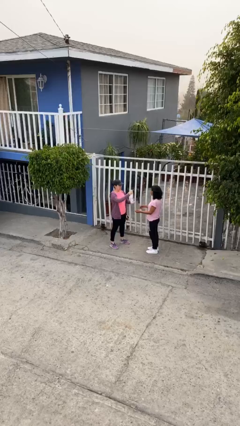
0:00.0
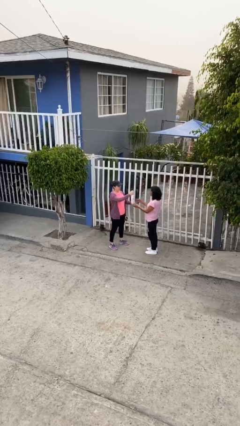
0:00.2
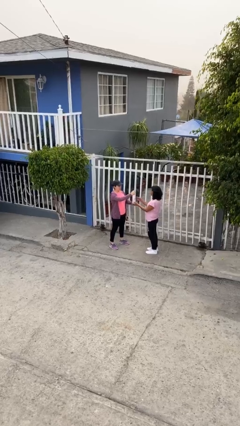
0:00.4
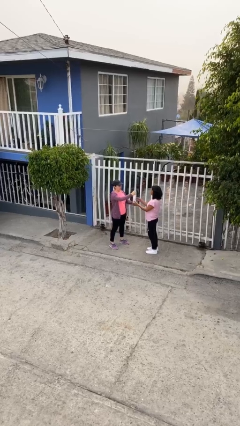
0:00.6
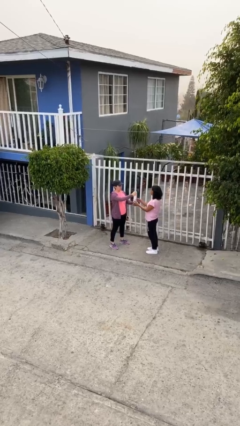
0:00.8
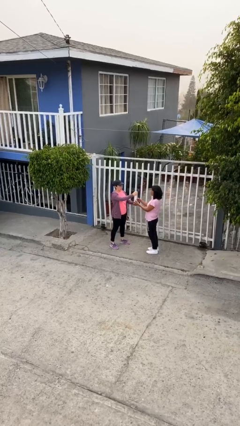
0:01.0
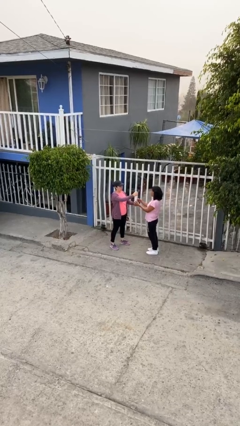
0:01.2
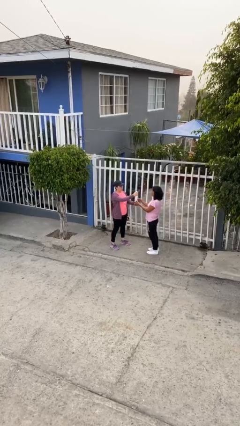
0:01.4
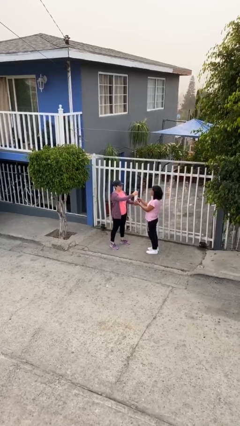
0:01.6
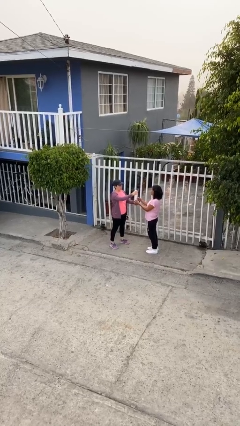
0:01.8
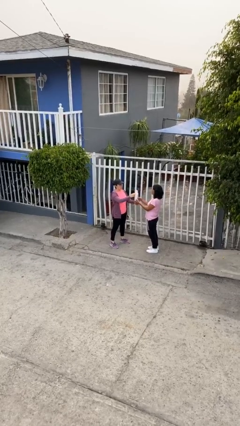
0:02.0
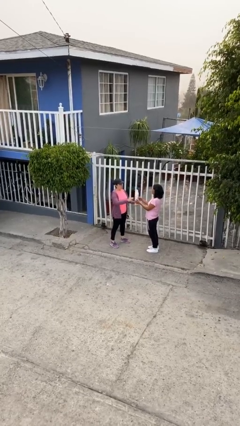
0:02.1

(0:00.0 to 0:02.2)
person transfers object to person

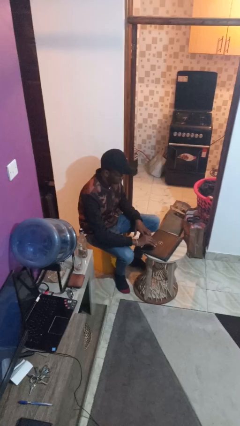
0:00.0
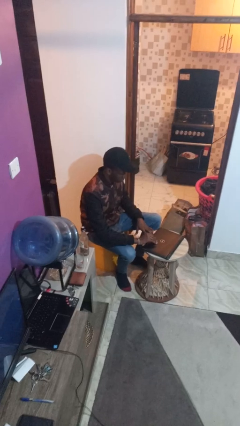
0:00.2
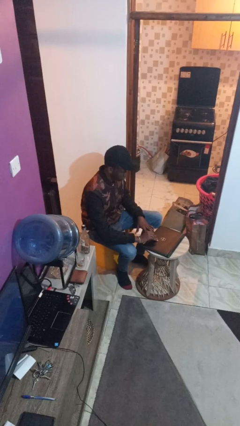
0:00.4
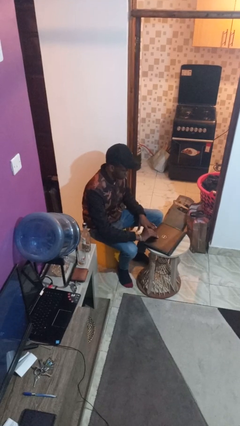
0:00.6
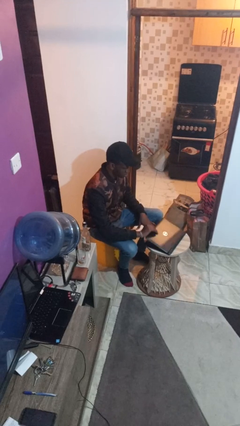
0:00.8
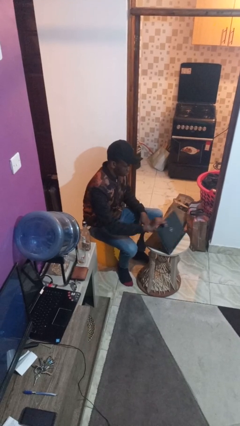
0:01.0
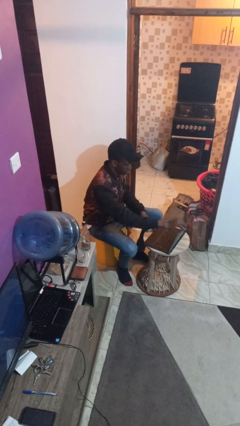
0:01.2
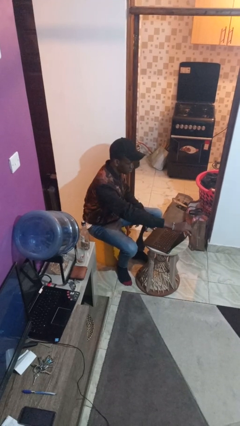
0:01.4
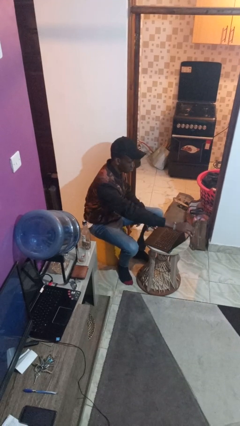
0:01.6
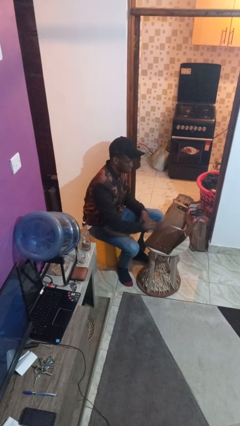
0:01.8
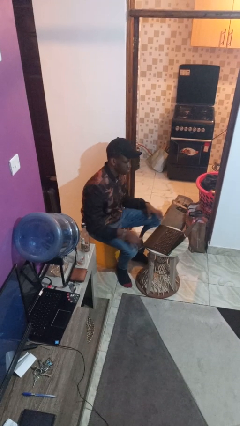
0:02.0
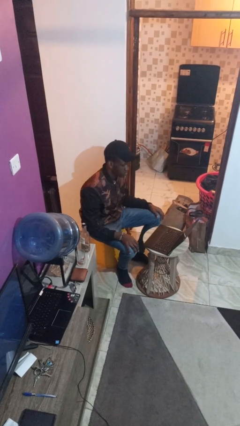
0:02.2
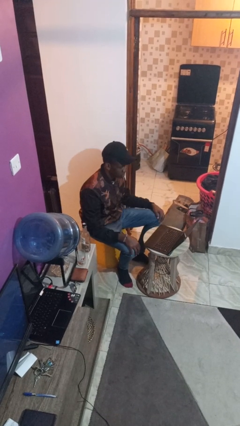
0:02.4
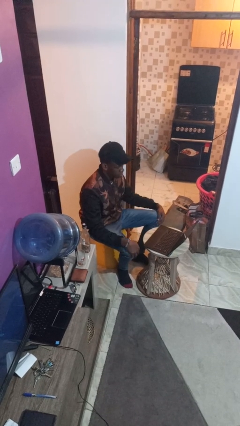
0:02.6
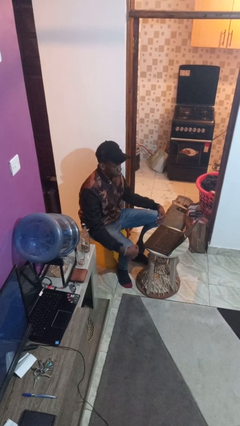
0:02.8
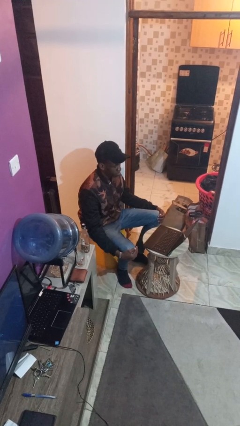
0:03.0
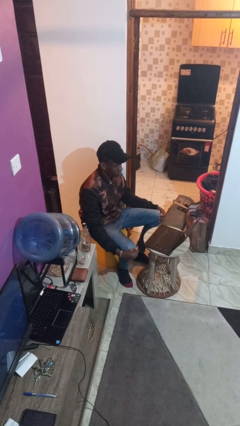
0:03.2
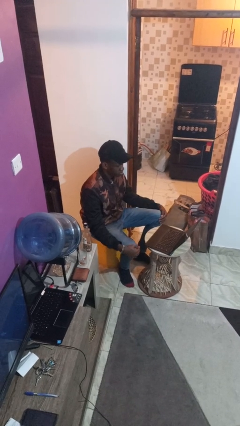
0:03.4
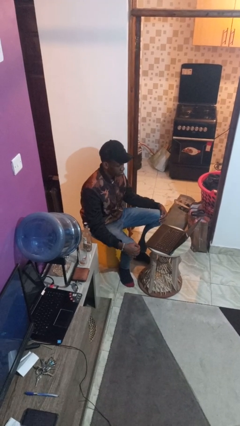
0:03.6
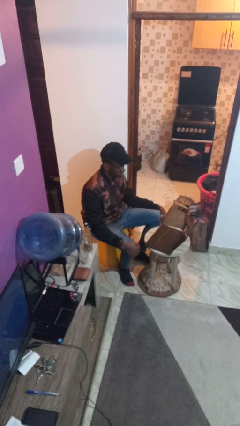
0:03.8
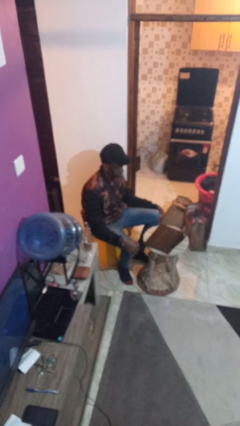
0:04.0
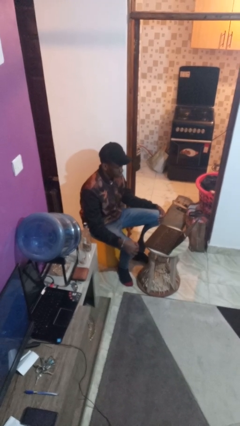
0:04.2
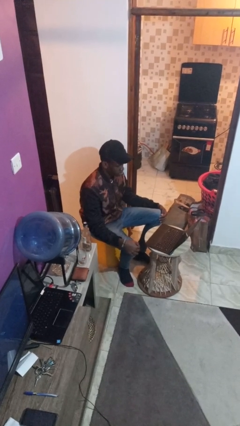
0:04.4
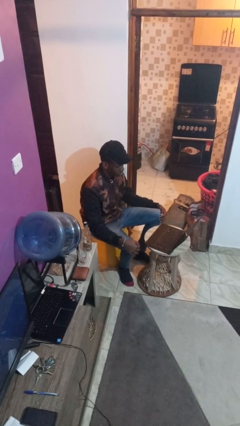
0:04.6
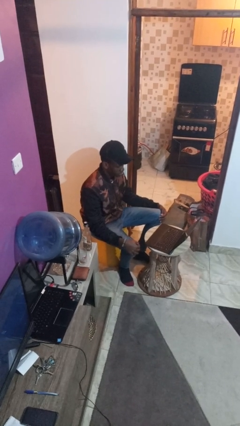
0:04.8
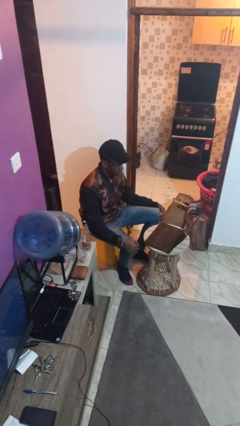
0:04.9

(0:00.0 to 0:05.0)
person opens laptop

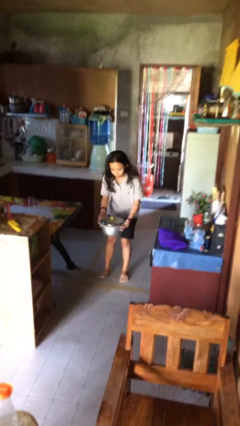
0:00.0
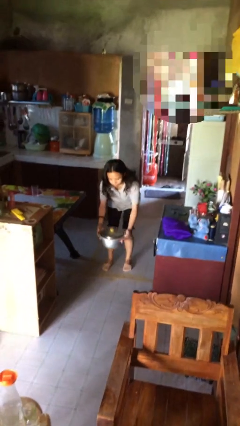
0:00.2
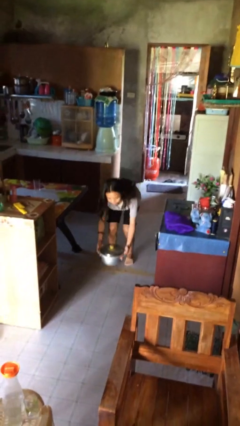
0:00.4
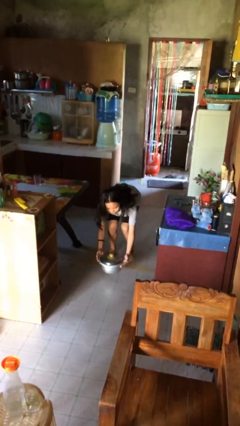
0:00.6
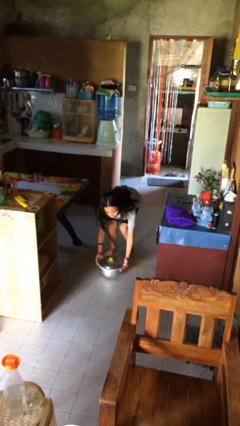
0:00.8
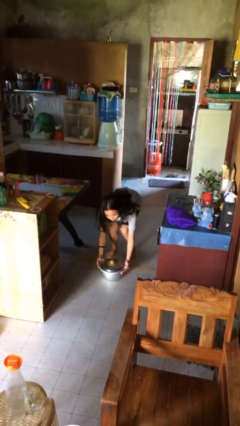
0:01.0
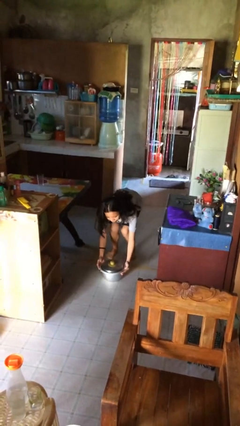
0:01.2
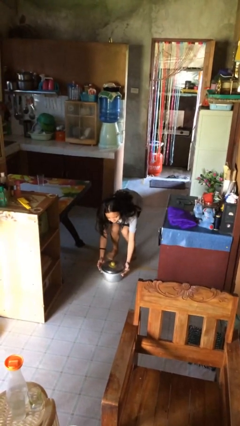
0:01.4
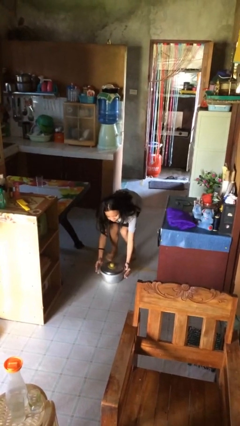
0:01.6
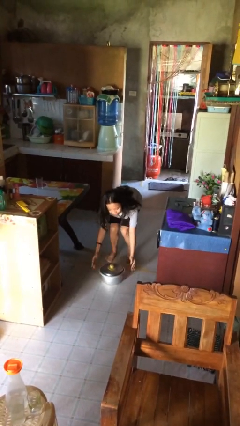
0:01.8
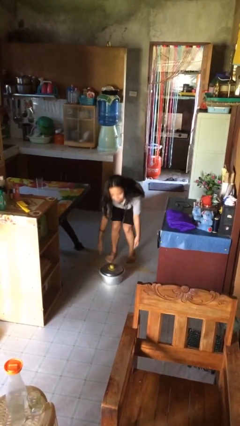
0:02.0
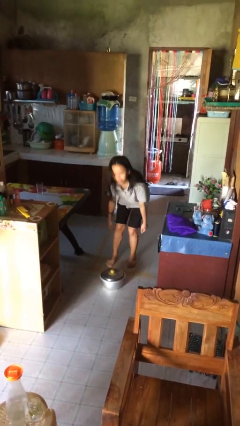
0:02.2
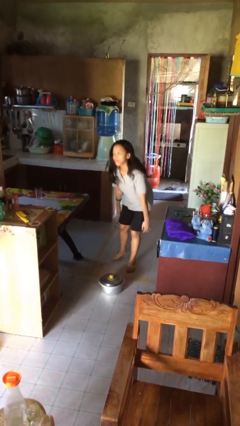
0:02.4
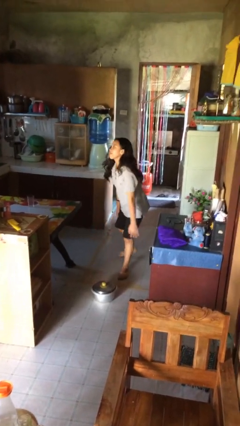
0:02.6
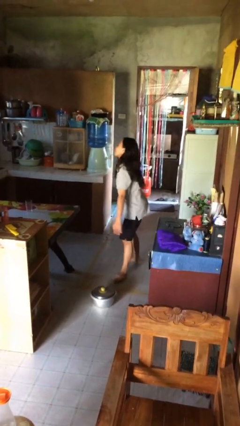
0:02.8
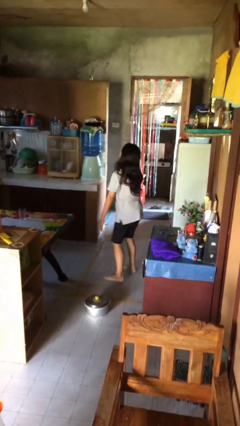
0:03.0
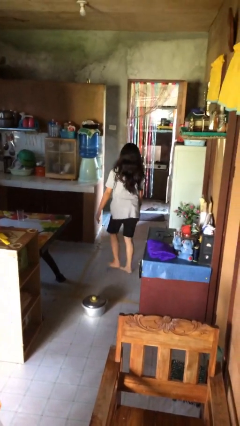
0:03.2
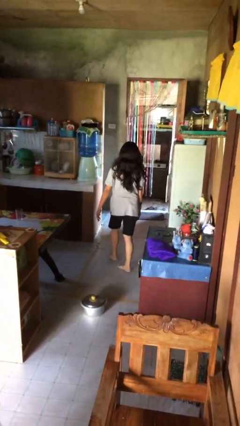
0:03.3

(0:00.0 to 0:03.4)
person puts down object on floor

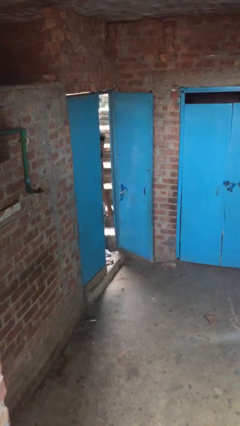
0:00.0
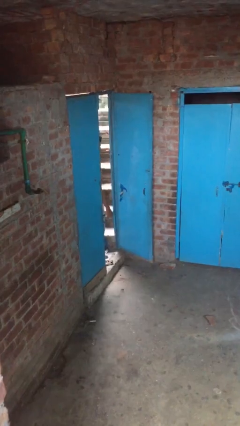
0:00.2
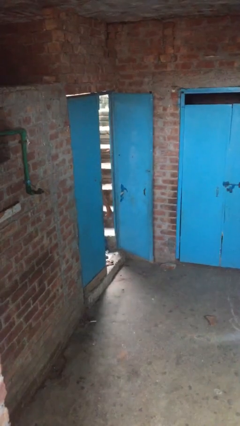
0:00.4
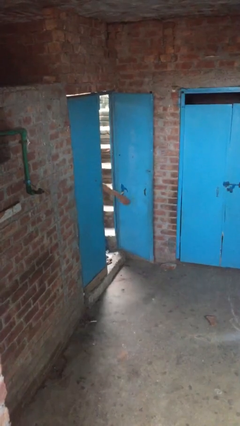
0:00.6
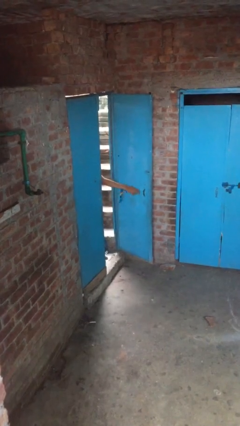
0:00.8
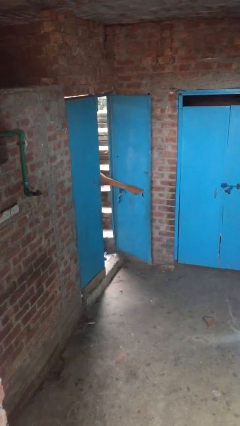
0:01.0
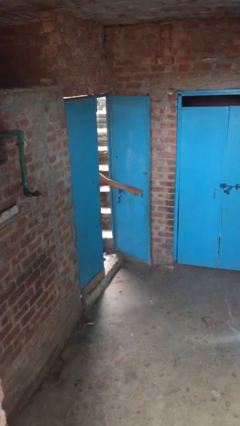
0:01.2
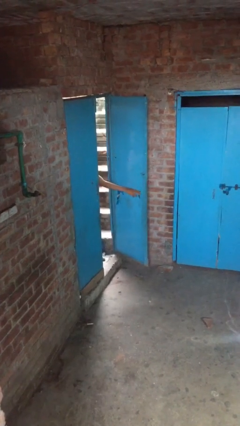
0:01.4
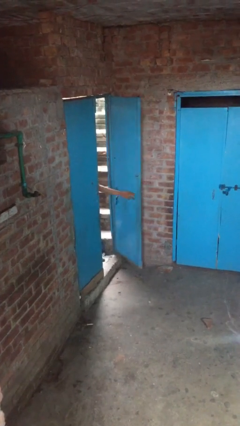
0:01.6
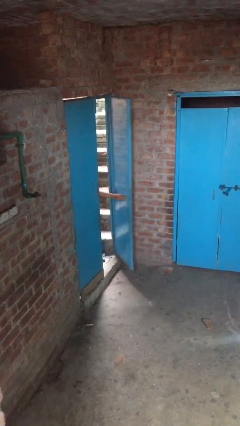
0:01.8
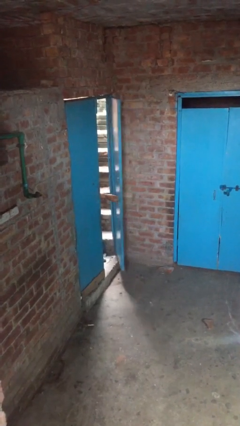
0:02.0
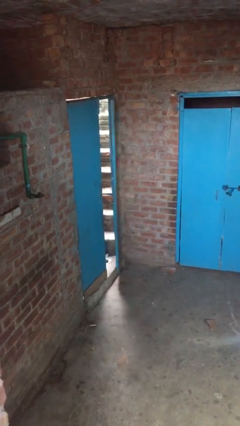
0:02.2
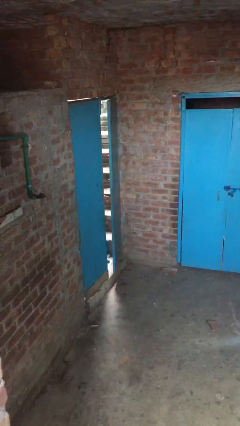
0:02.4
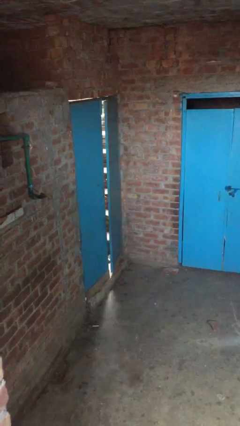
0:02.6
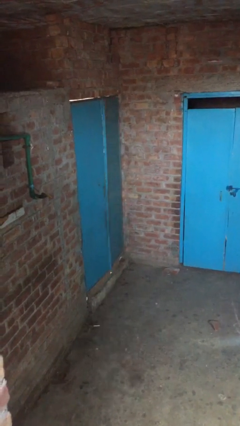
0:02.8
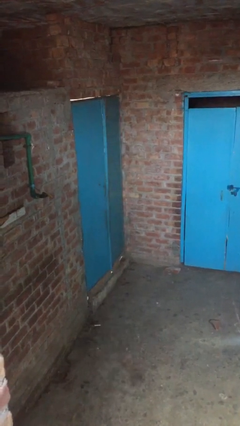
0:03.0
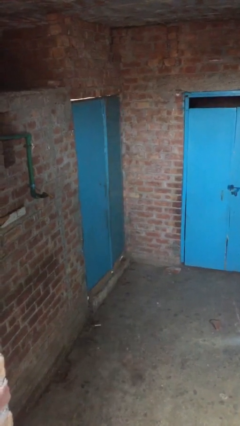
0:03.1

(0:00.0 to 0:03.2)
person closes facility door

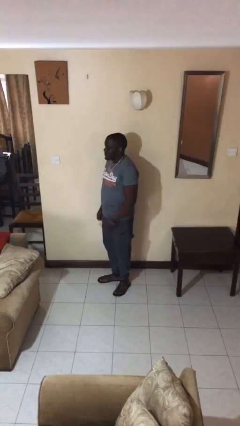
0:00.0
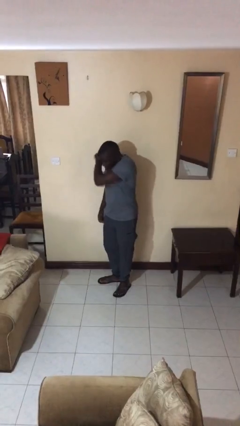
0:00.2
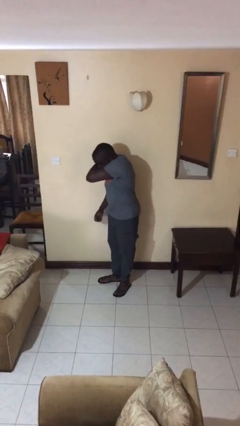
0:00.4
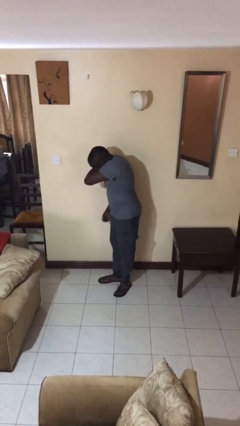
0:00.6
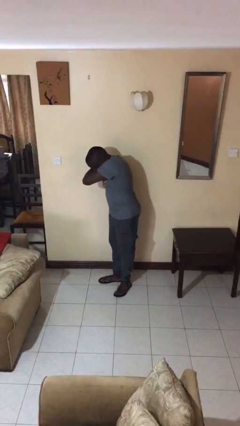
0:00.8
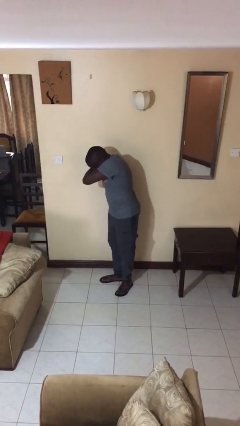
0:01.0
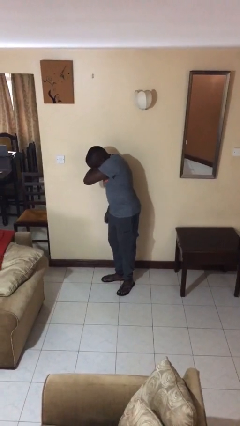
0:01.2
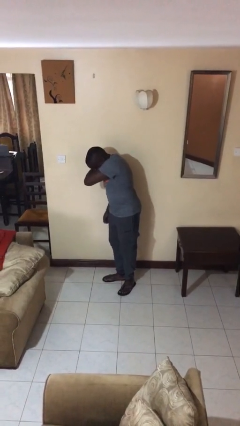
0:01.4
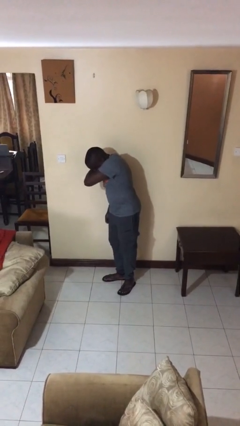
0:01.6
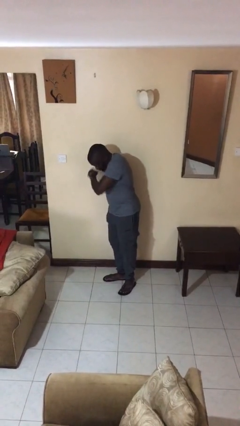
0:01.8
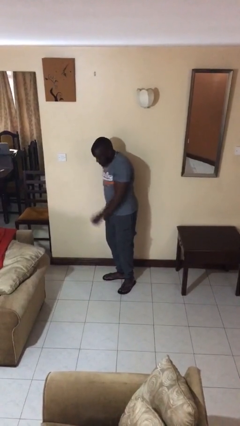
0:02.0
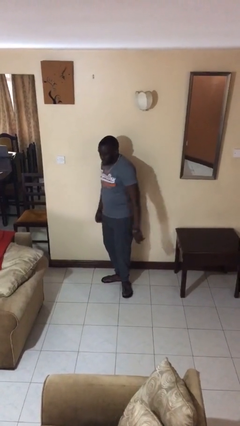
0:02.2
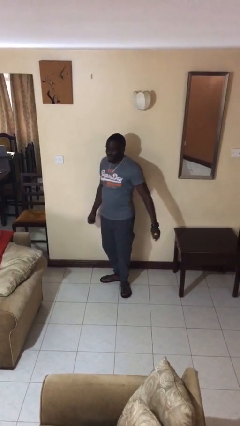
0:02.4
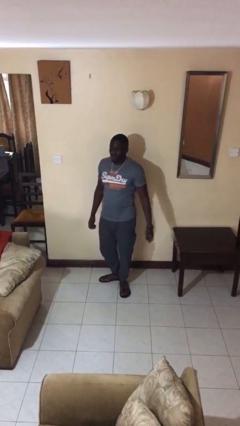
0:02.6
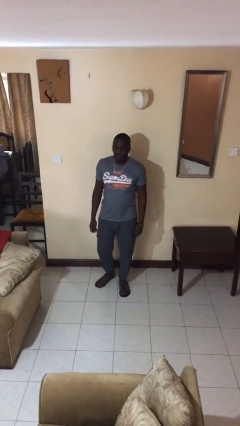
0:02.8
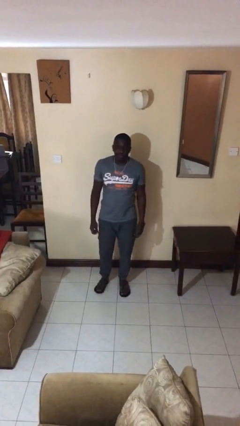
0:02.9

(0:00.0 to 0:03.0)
person sneezes into arm

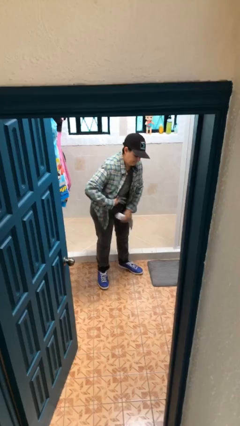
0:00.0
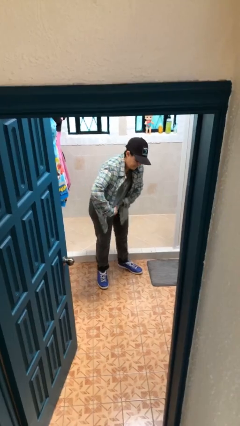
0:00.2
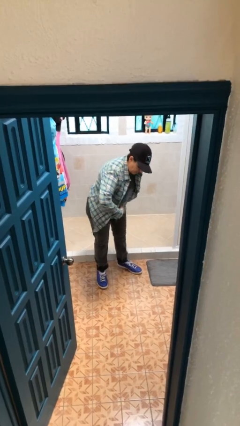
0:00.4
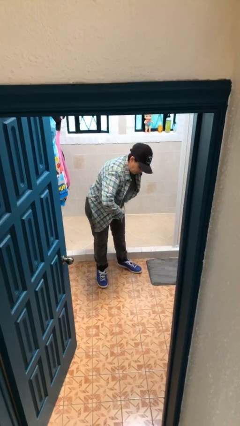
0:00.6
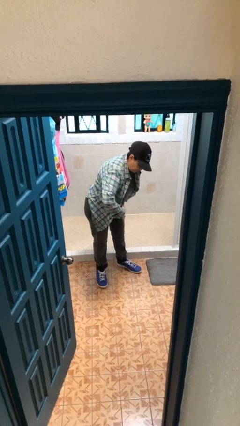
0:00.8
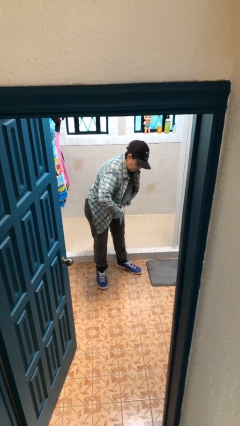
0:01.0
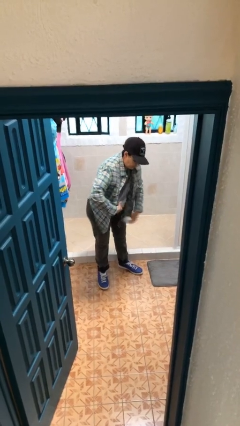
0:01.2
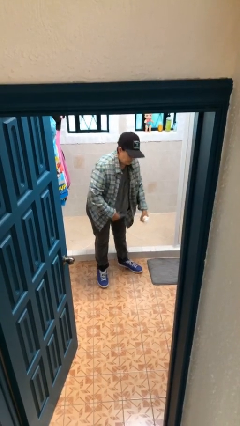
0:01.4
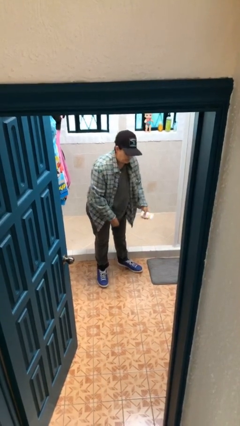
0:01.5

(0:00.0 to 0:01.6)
person applies deodorant
